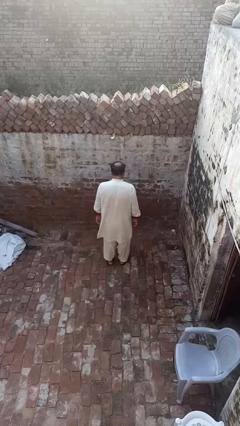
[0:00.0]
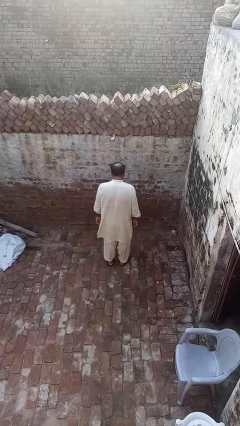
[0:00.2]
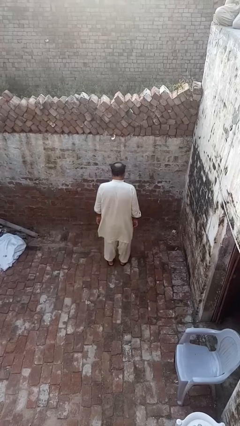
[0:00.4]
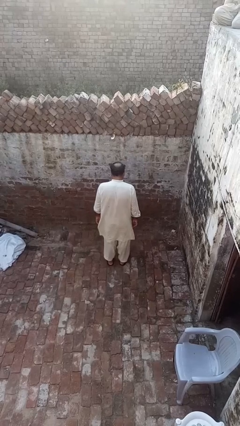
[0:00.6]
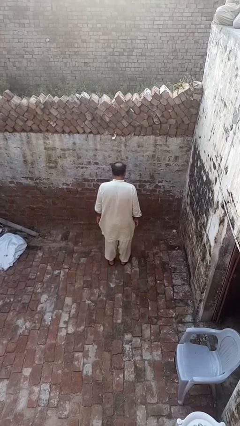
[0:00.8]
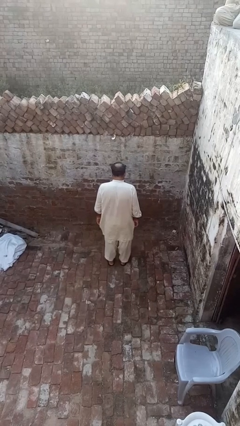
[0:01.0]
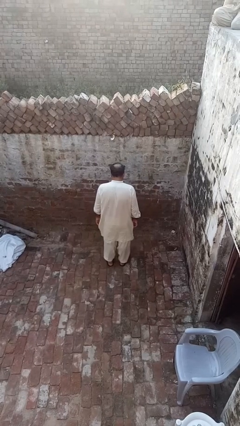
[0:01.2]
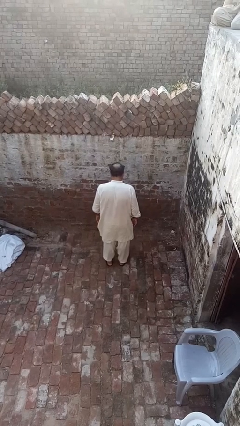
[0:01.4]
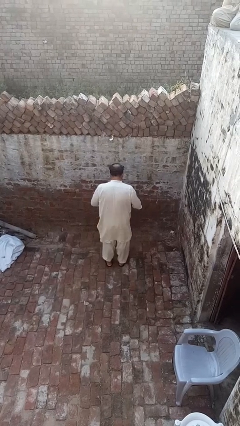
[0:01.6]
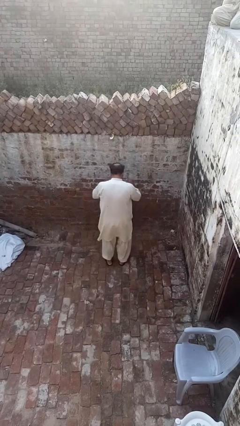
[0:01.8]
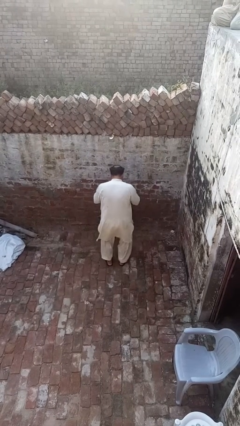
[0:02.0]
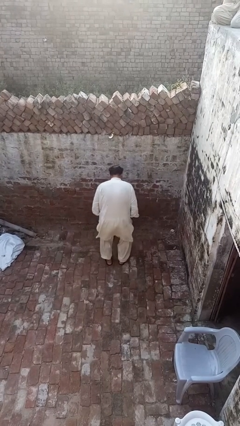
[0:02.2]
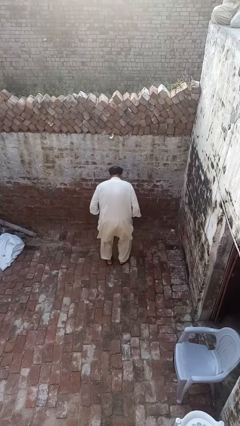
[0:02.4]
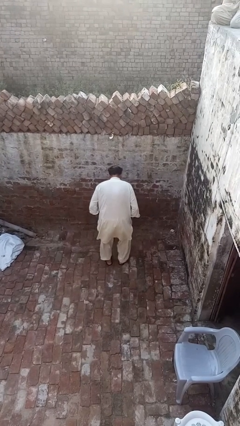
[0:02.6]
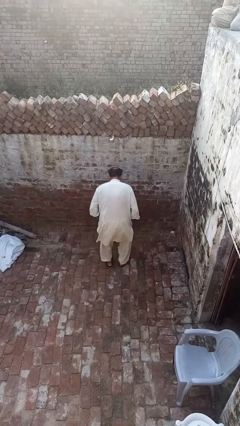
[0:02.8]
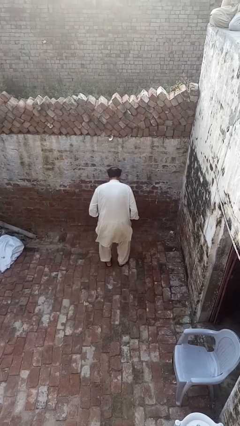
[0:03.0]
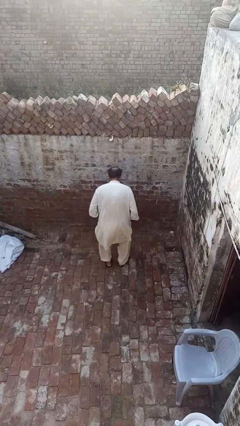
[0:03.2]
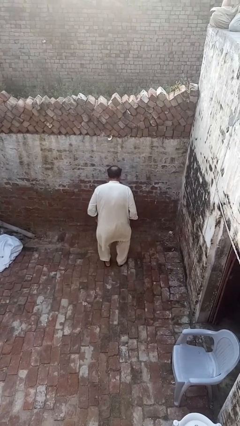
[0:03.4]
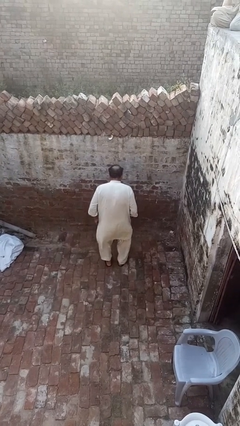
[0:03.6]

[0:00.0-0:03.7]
person slaps hands on thighs

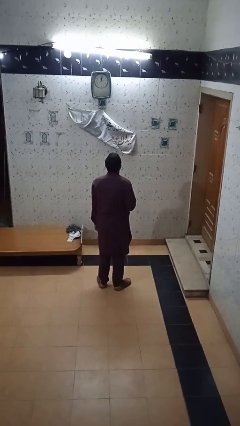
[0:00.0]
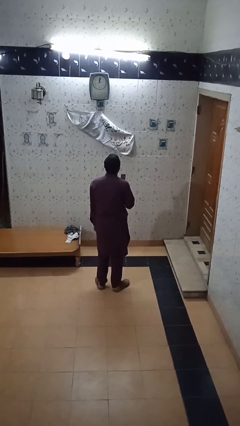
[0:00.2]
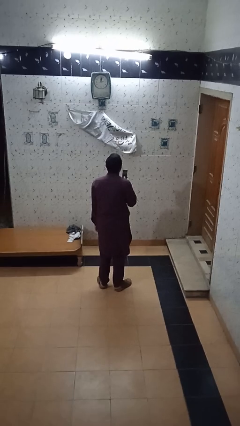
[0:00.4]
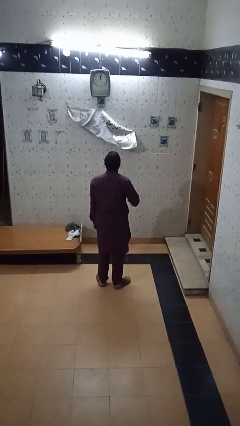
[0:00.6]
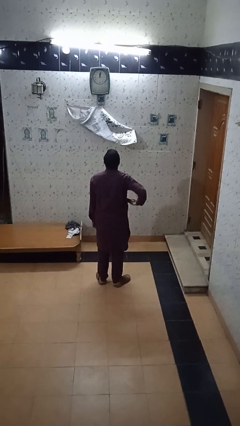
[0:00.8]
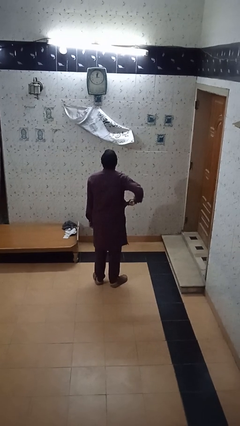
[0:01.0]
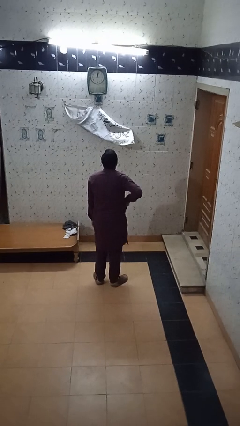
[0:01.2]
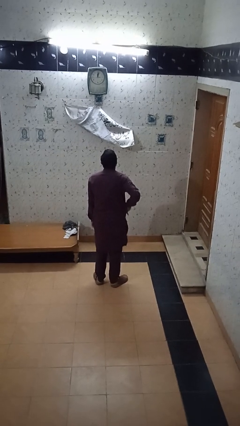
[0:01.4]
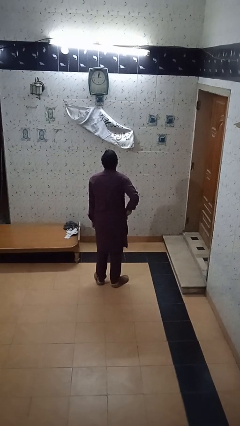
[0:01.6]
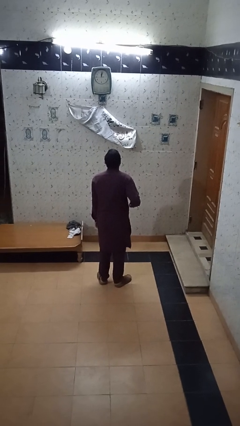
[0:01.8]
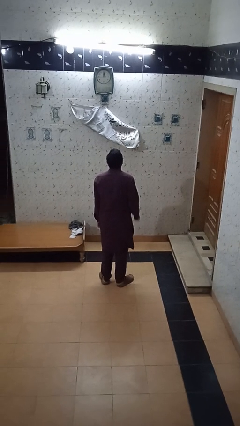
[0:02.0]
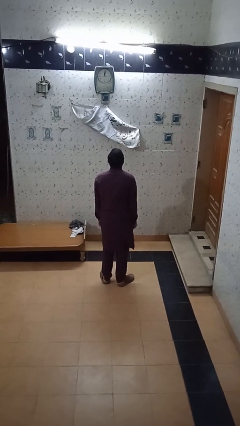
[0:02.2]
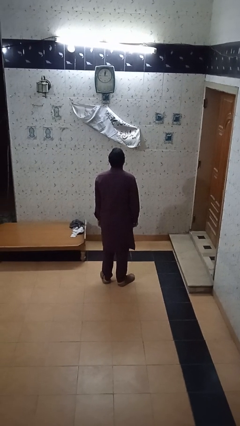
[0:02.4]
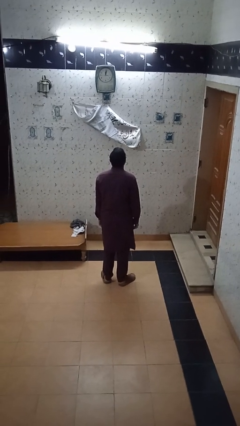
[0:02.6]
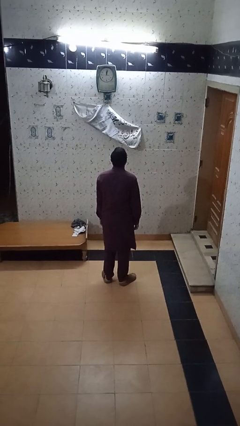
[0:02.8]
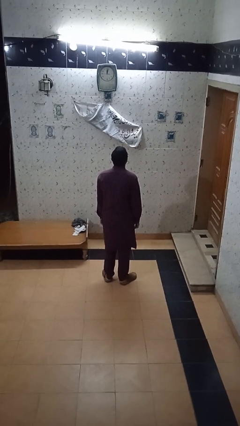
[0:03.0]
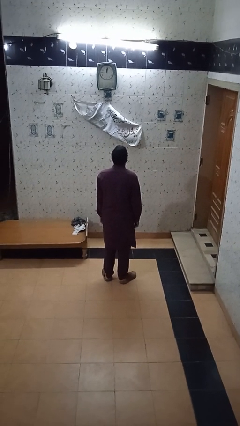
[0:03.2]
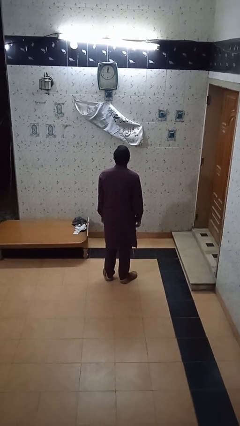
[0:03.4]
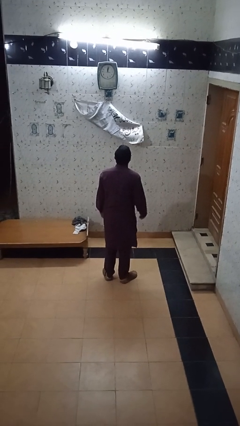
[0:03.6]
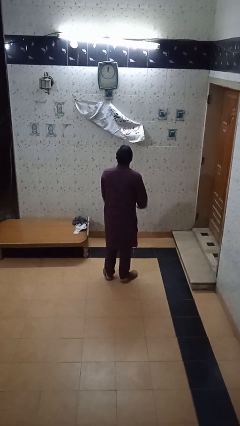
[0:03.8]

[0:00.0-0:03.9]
person puts phone into pocket

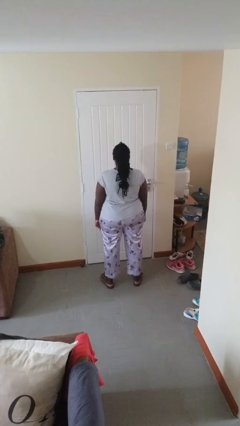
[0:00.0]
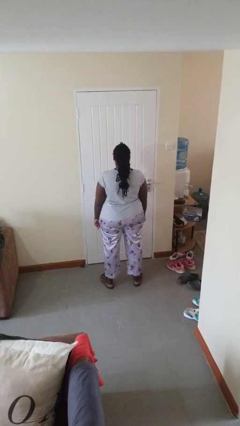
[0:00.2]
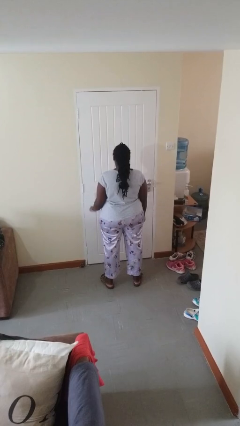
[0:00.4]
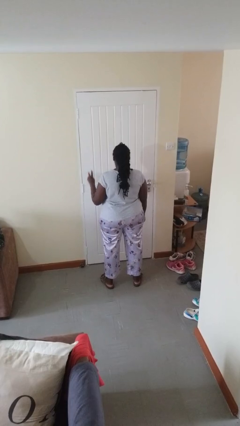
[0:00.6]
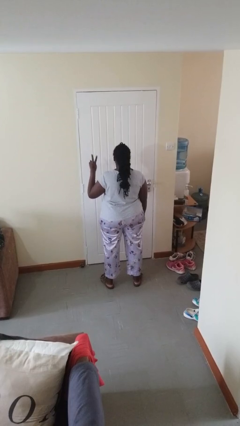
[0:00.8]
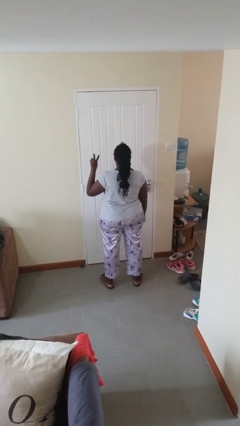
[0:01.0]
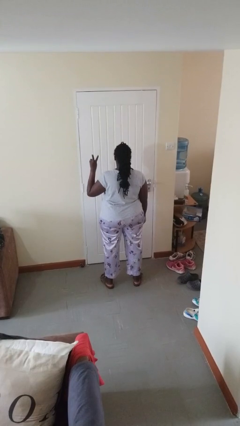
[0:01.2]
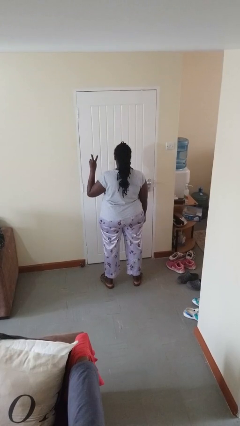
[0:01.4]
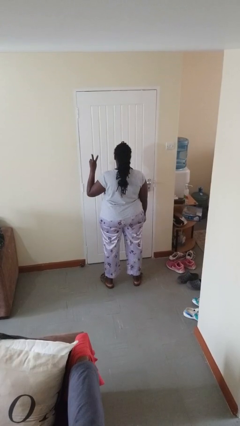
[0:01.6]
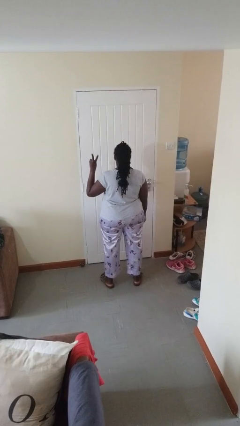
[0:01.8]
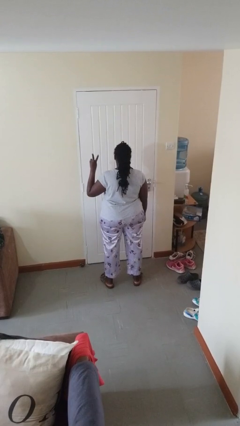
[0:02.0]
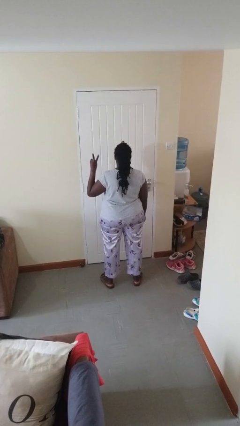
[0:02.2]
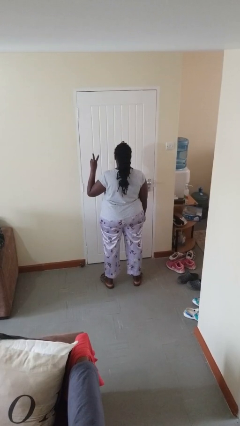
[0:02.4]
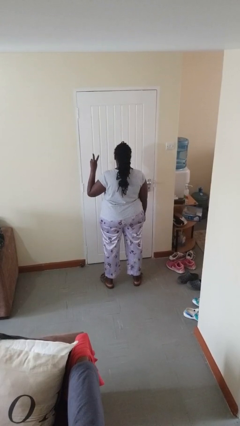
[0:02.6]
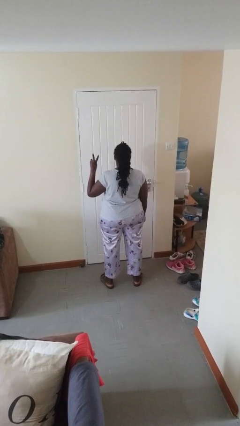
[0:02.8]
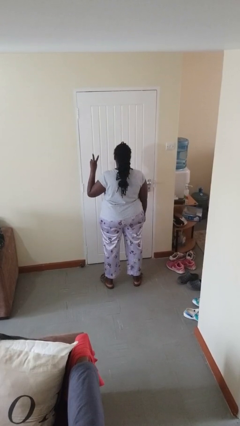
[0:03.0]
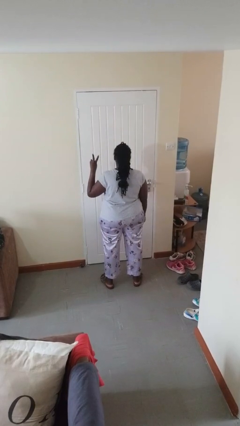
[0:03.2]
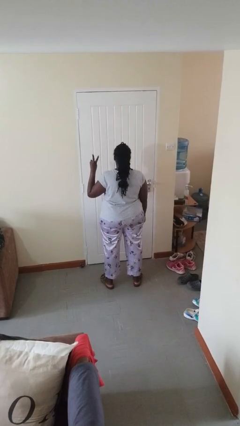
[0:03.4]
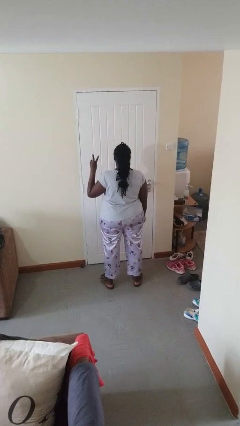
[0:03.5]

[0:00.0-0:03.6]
person gestures peace

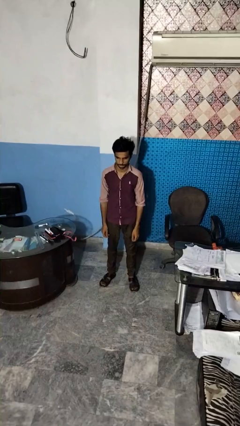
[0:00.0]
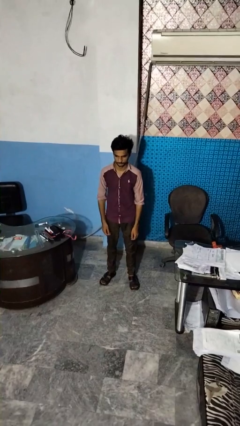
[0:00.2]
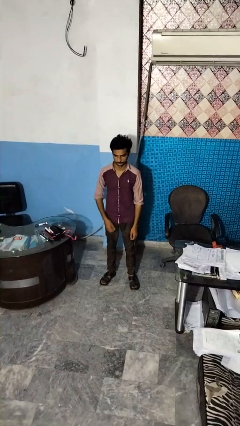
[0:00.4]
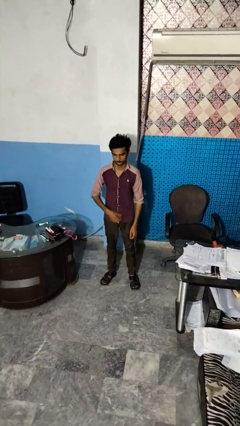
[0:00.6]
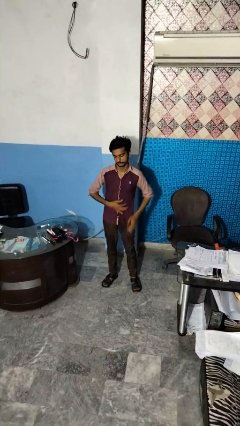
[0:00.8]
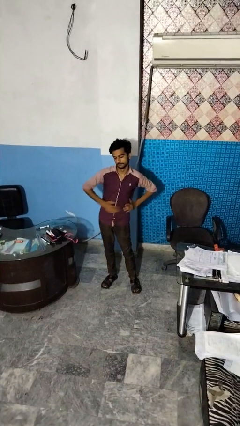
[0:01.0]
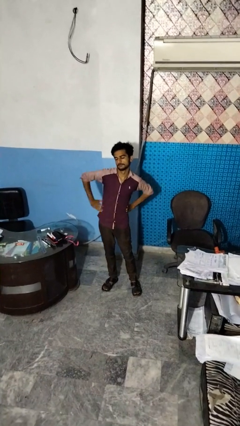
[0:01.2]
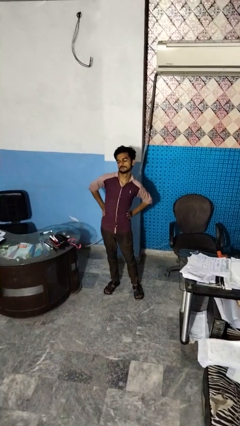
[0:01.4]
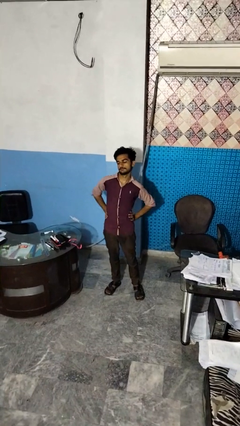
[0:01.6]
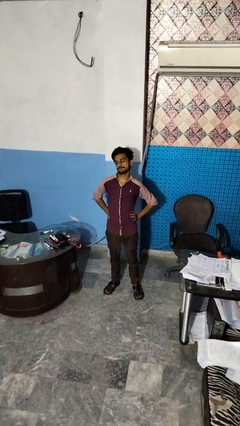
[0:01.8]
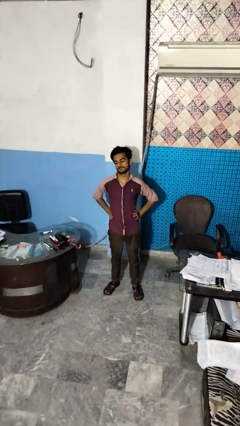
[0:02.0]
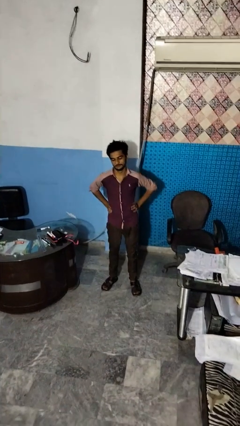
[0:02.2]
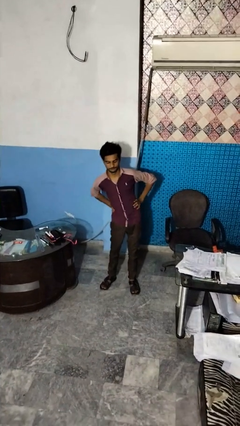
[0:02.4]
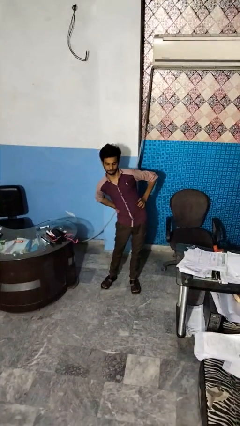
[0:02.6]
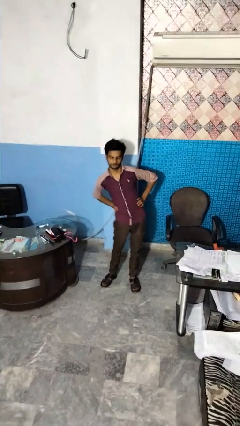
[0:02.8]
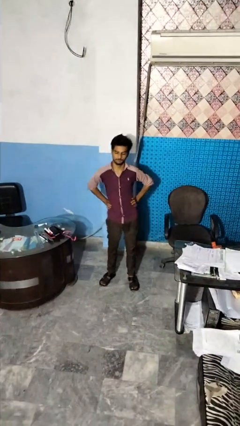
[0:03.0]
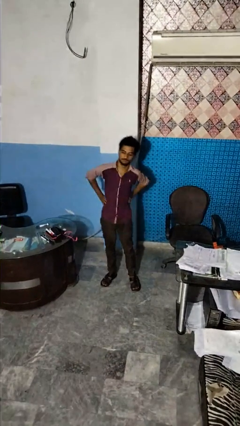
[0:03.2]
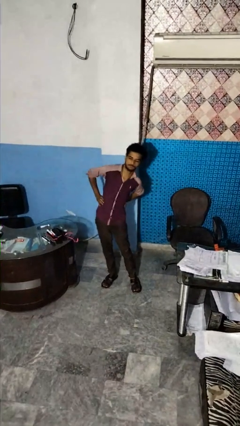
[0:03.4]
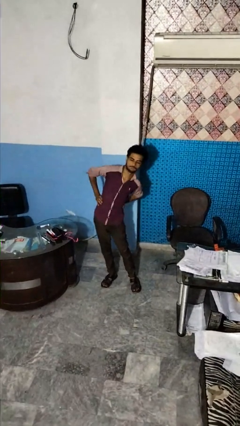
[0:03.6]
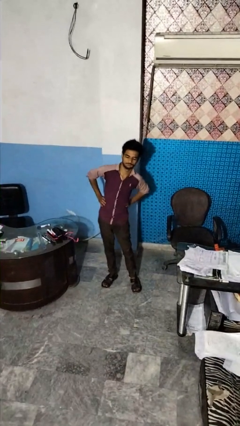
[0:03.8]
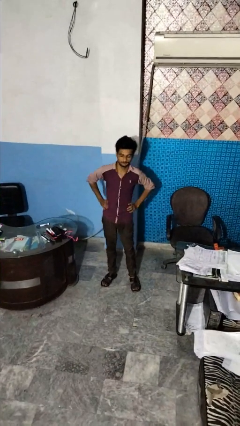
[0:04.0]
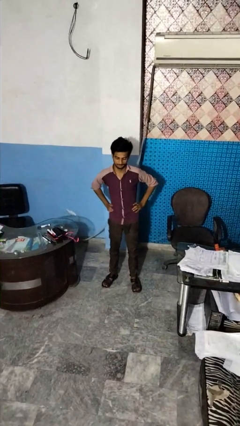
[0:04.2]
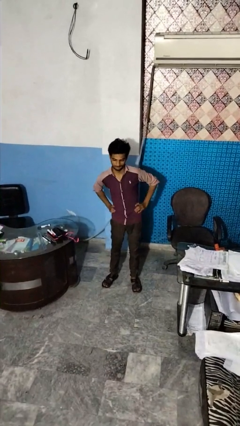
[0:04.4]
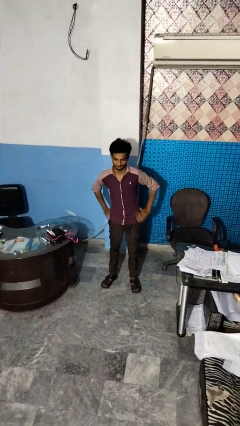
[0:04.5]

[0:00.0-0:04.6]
person stretches back

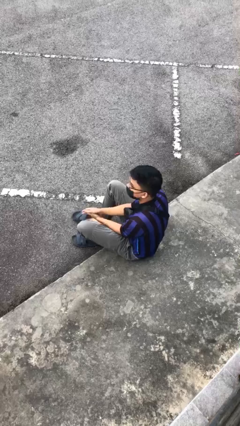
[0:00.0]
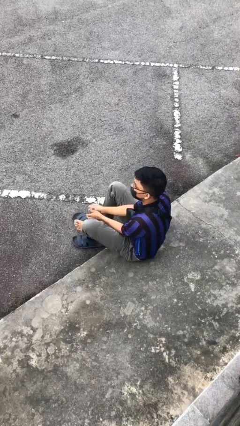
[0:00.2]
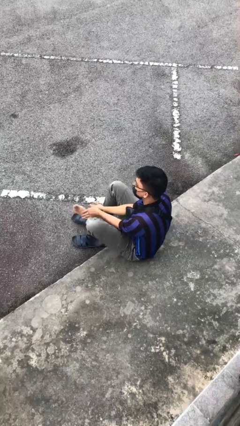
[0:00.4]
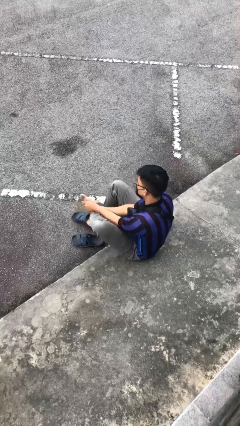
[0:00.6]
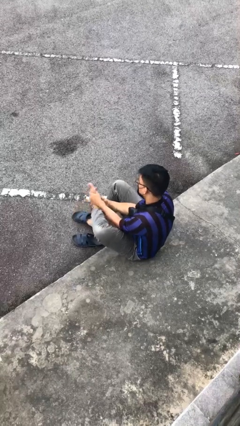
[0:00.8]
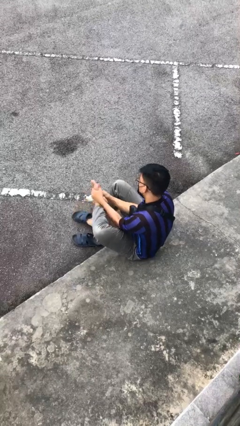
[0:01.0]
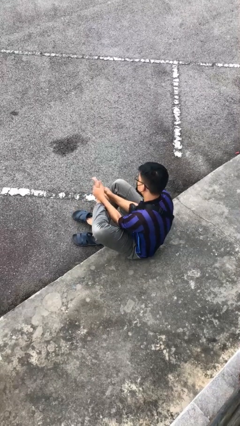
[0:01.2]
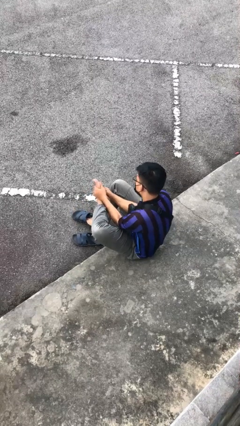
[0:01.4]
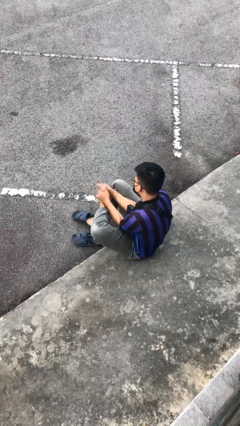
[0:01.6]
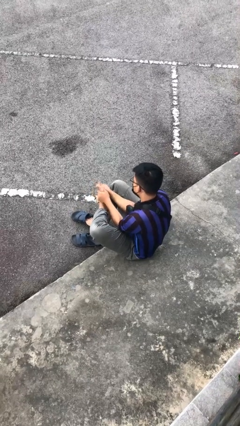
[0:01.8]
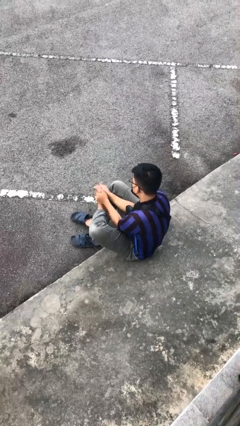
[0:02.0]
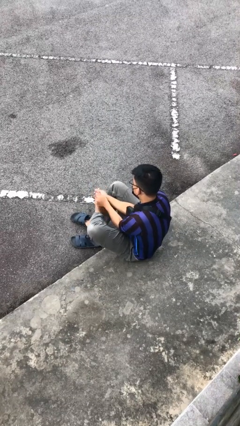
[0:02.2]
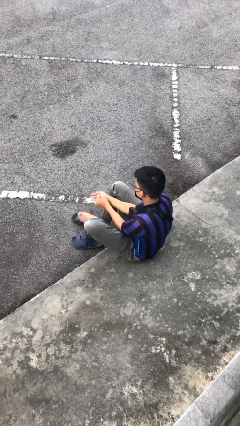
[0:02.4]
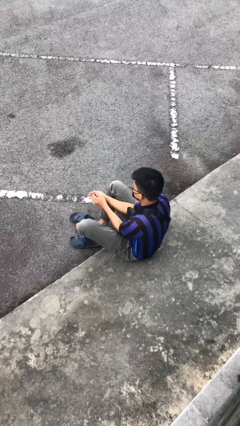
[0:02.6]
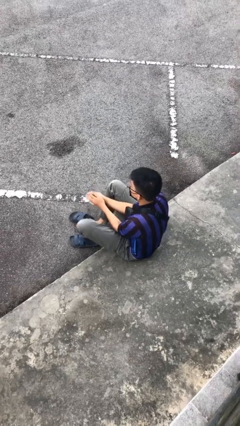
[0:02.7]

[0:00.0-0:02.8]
person rubs foot
